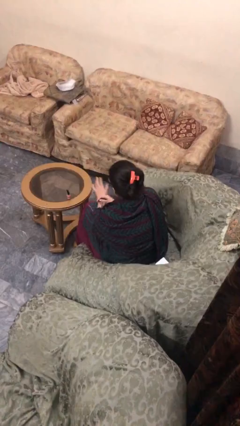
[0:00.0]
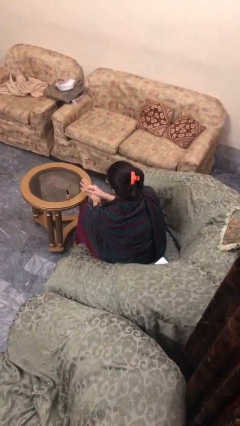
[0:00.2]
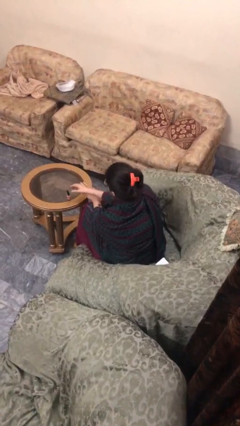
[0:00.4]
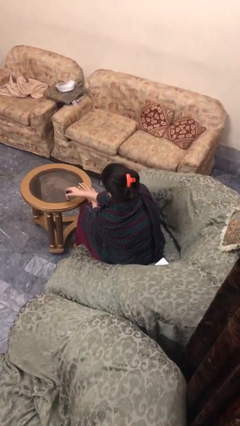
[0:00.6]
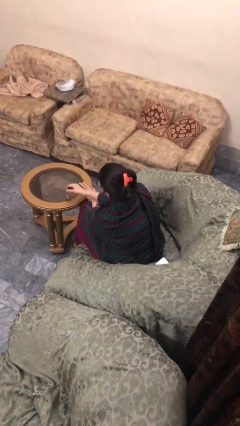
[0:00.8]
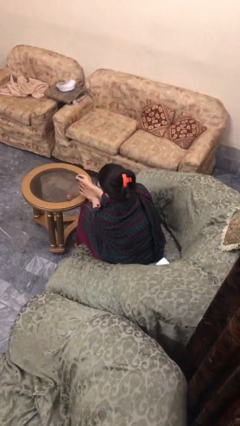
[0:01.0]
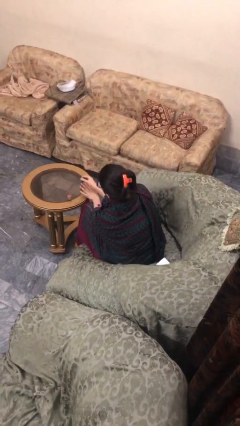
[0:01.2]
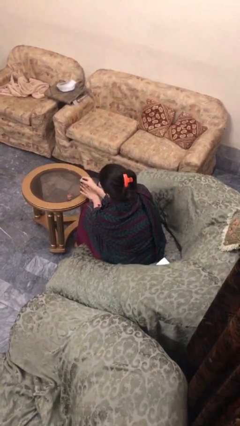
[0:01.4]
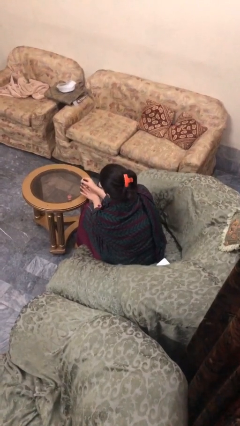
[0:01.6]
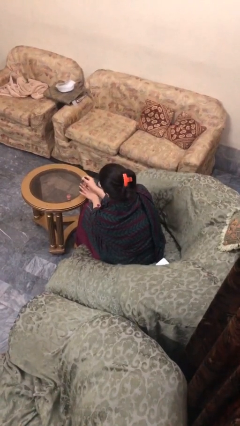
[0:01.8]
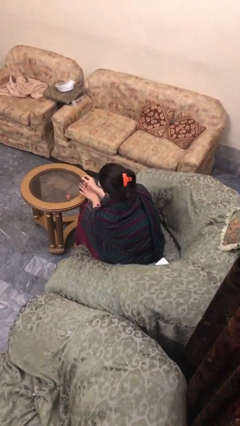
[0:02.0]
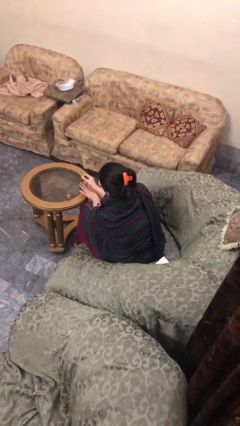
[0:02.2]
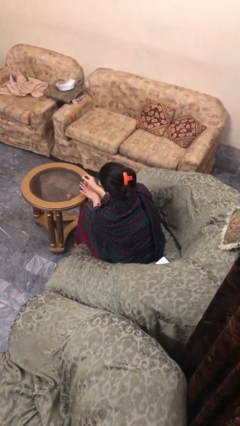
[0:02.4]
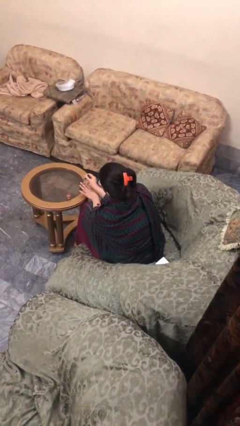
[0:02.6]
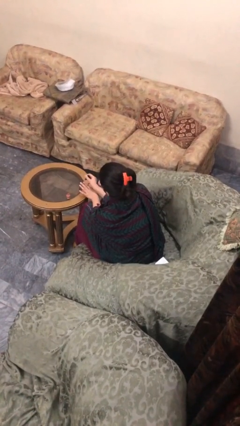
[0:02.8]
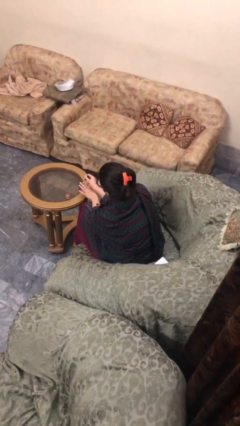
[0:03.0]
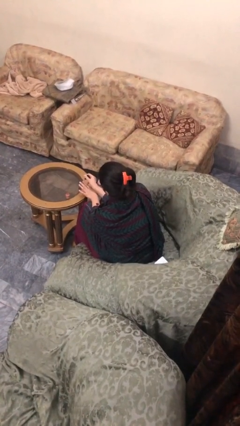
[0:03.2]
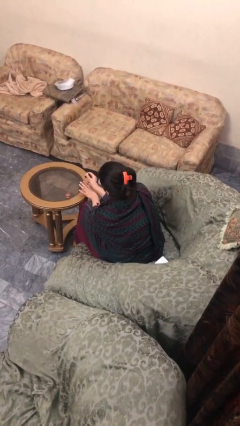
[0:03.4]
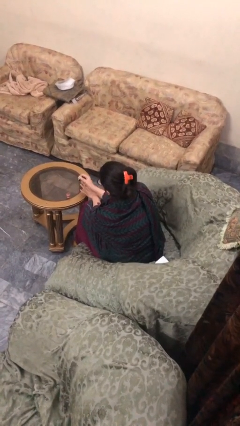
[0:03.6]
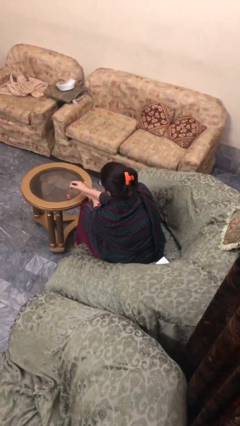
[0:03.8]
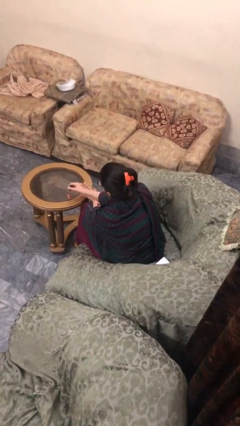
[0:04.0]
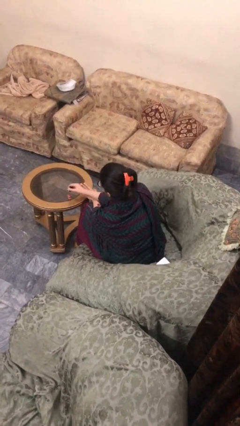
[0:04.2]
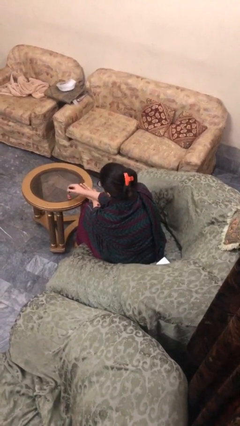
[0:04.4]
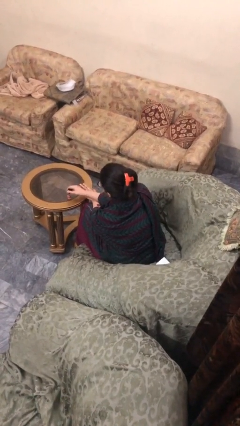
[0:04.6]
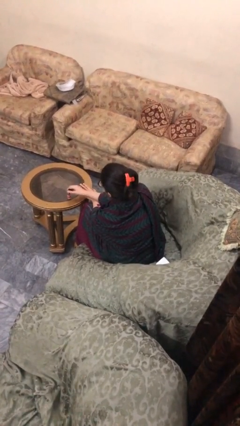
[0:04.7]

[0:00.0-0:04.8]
person paints fingernails

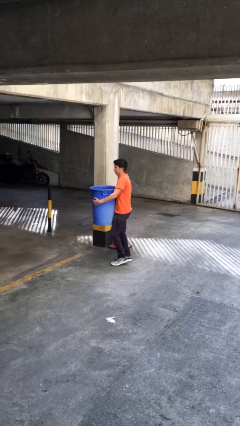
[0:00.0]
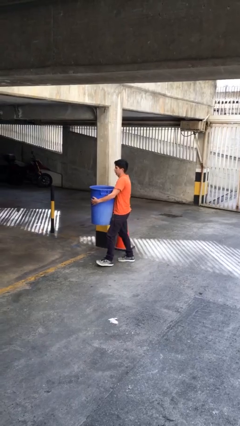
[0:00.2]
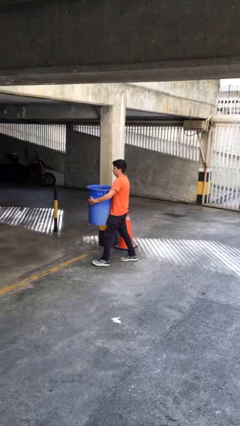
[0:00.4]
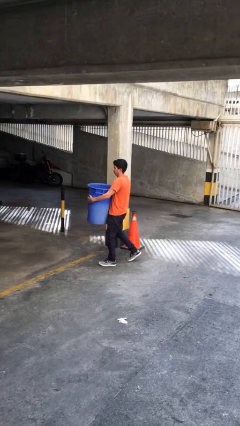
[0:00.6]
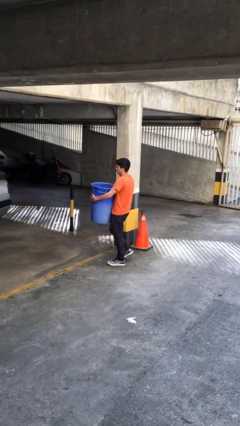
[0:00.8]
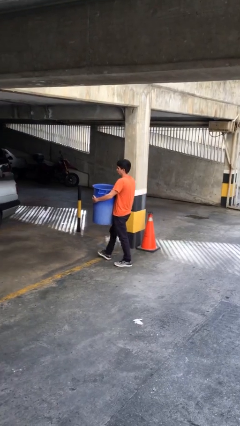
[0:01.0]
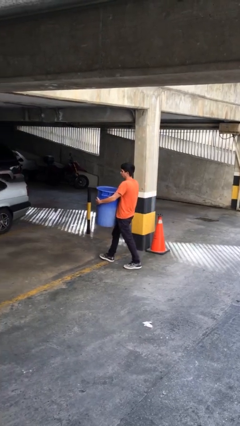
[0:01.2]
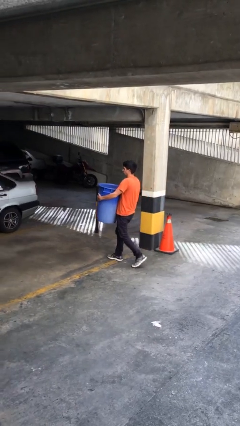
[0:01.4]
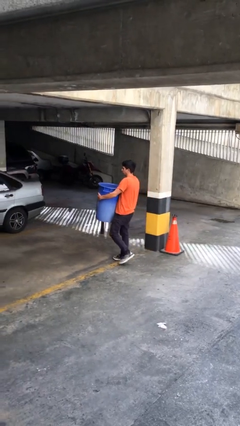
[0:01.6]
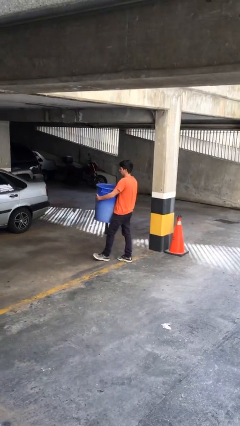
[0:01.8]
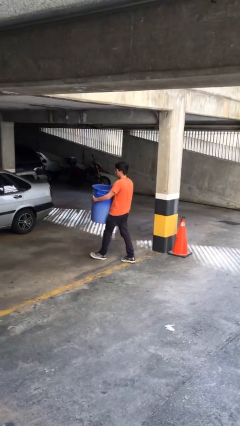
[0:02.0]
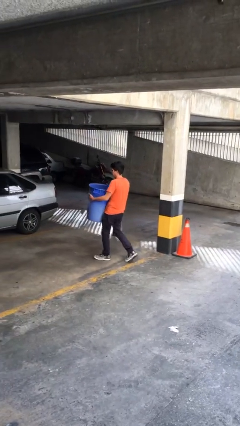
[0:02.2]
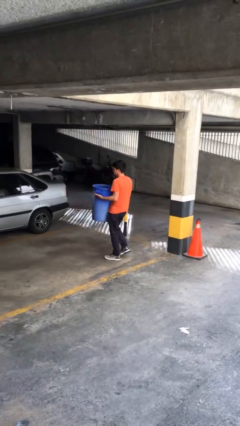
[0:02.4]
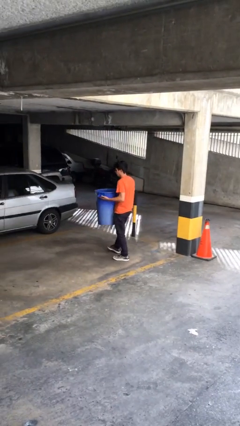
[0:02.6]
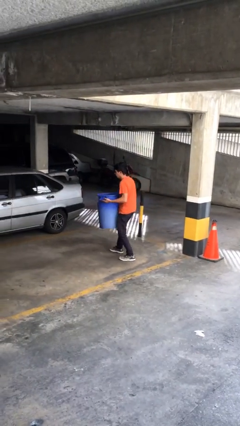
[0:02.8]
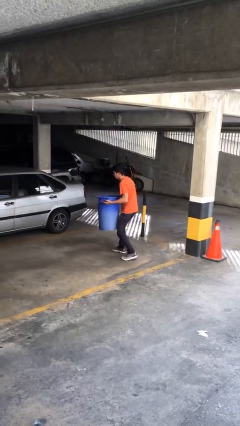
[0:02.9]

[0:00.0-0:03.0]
person carries heavy object

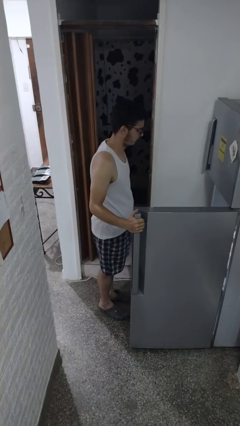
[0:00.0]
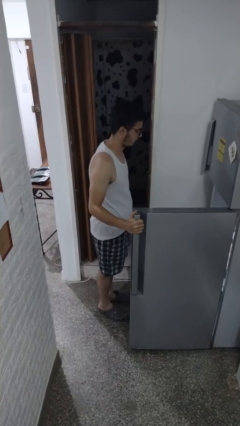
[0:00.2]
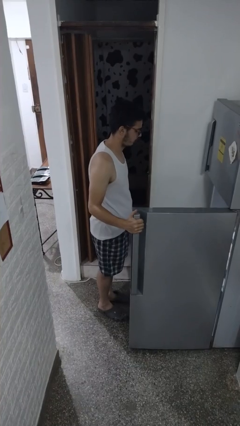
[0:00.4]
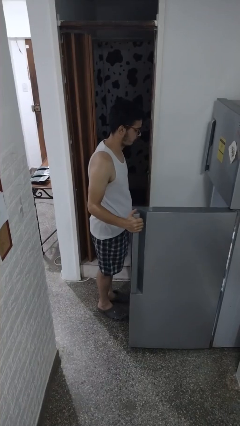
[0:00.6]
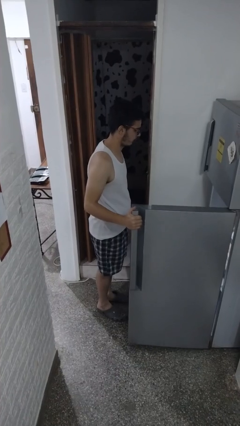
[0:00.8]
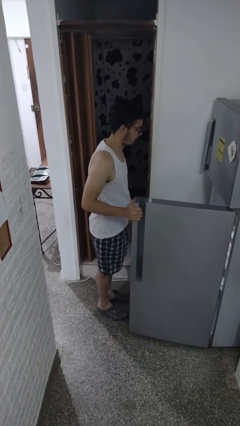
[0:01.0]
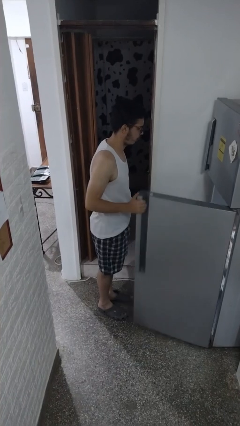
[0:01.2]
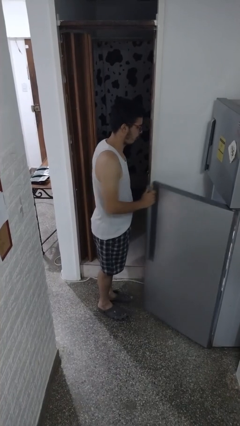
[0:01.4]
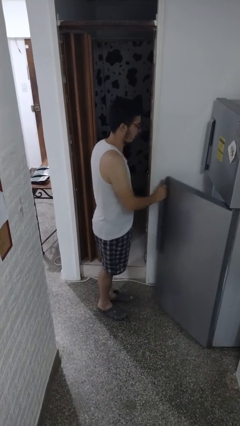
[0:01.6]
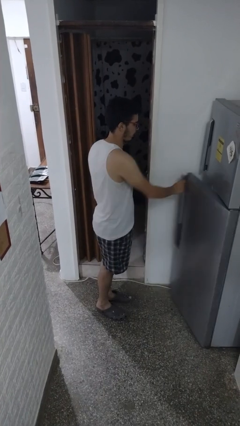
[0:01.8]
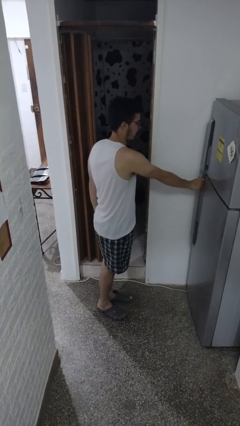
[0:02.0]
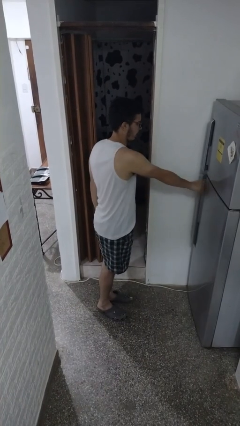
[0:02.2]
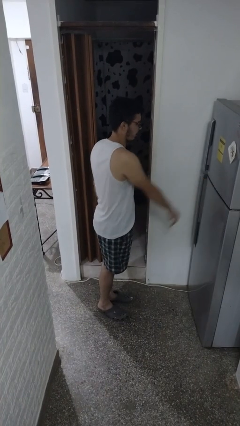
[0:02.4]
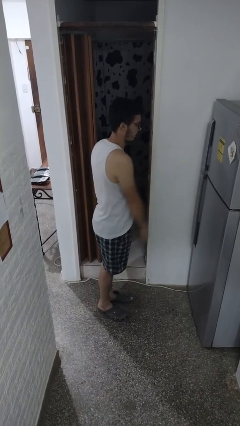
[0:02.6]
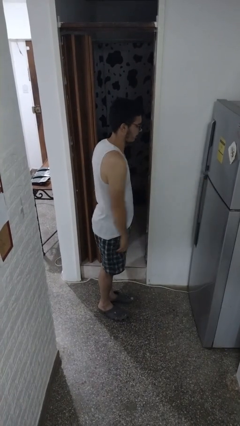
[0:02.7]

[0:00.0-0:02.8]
person closes refrigerator

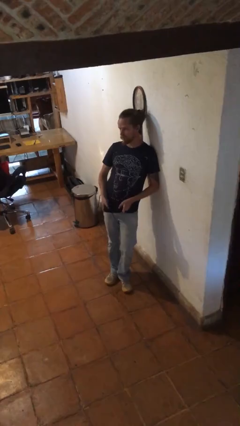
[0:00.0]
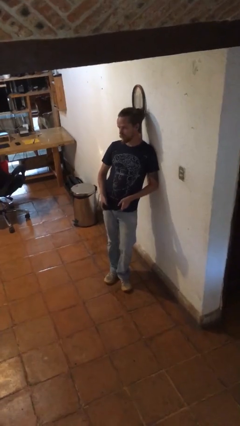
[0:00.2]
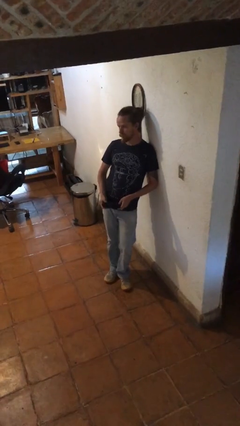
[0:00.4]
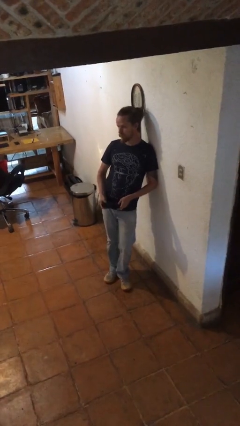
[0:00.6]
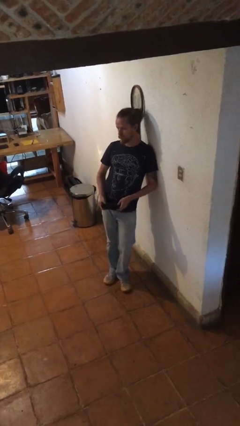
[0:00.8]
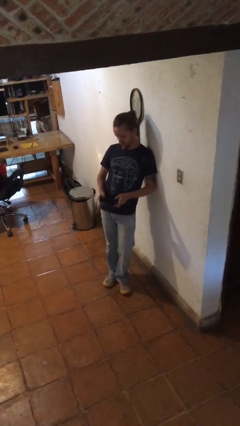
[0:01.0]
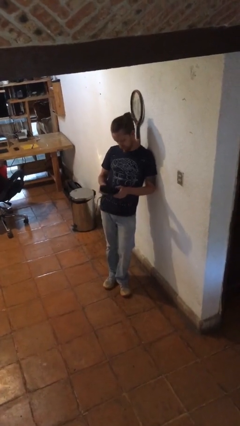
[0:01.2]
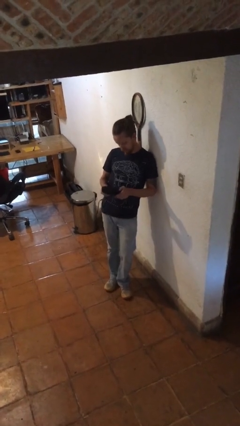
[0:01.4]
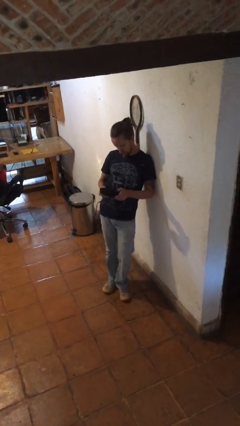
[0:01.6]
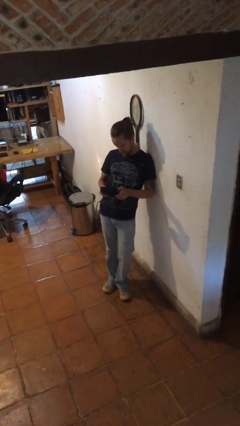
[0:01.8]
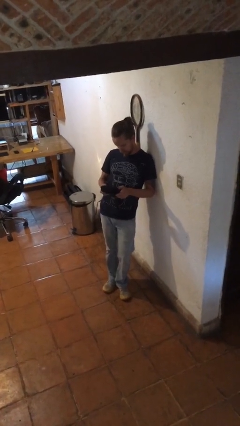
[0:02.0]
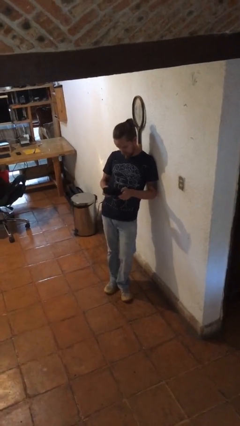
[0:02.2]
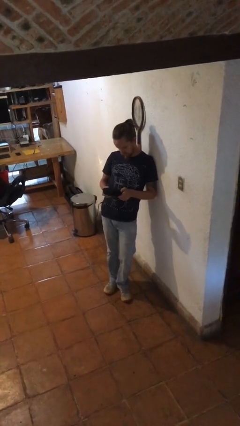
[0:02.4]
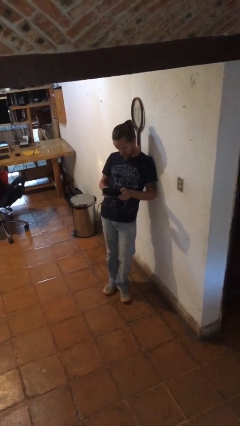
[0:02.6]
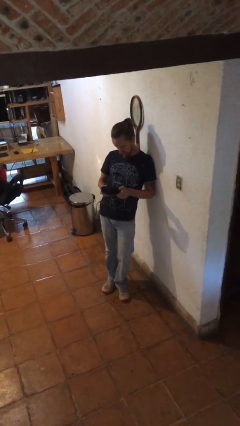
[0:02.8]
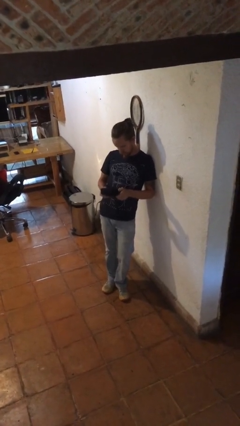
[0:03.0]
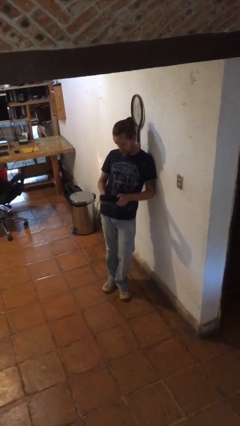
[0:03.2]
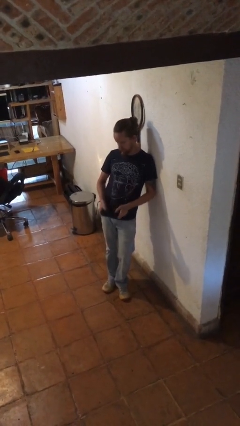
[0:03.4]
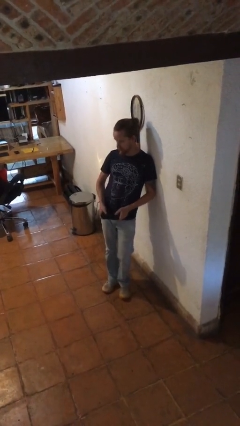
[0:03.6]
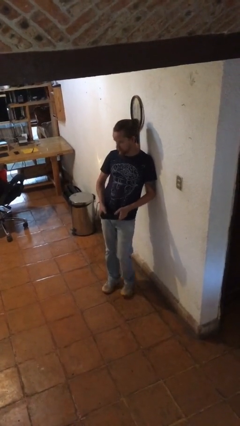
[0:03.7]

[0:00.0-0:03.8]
person interacts with handheld game

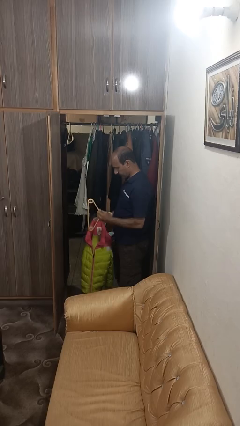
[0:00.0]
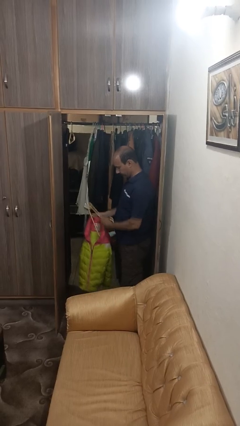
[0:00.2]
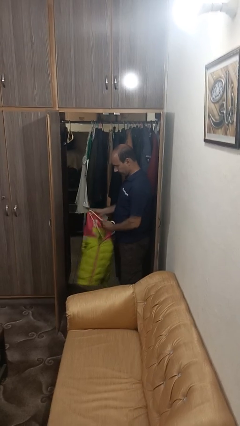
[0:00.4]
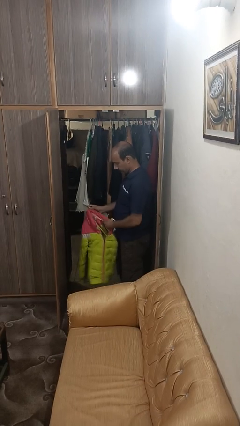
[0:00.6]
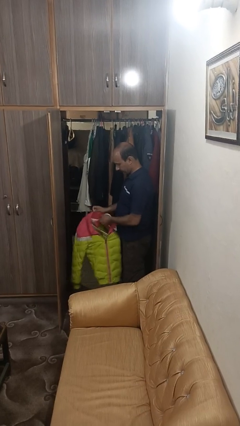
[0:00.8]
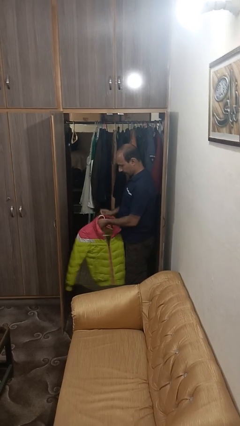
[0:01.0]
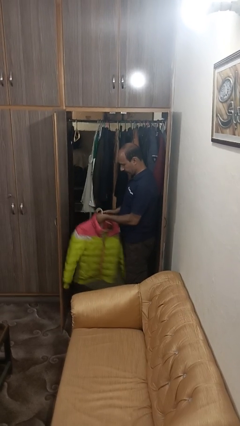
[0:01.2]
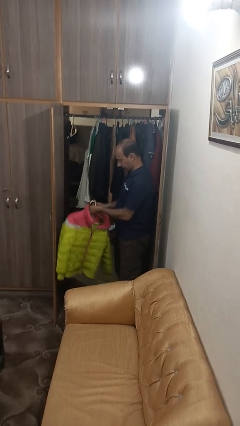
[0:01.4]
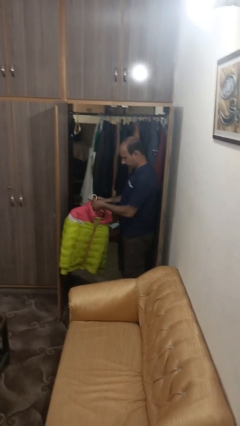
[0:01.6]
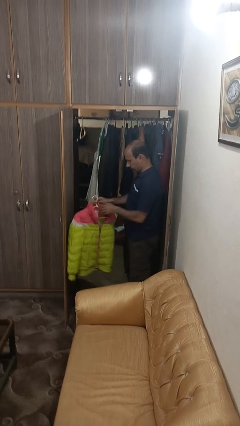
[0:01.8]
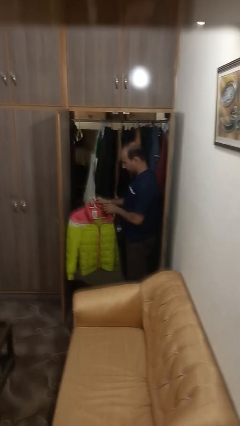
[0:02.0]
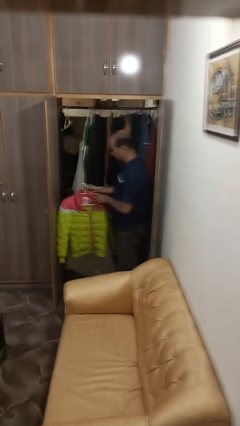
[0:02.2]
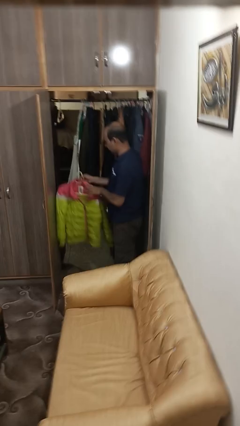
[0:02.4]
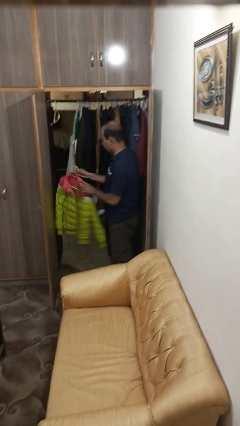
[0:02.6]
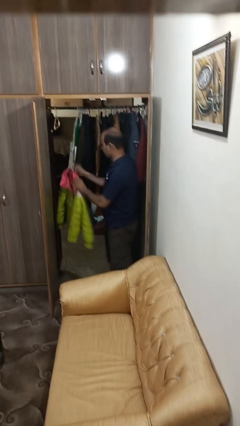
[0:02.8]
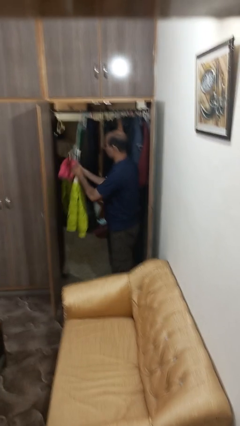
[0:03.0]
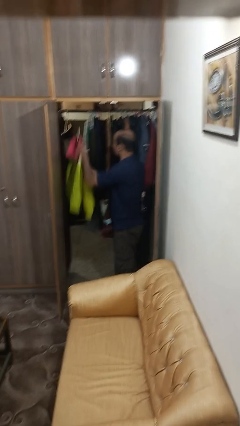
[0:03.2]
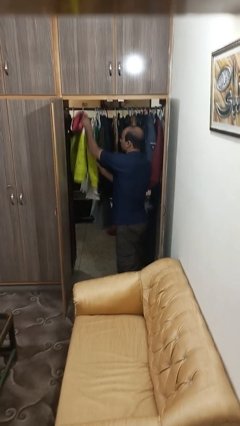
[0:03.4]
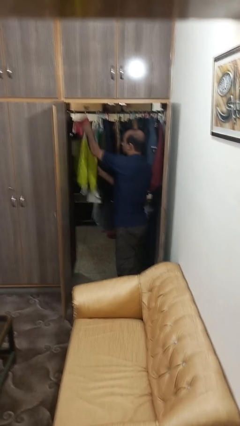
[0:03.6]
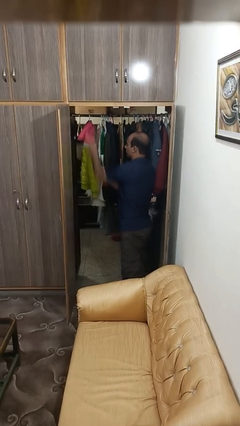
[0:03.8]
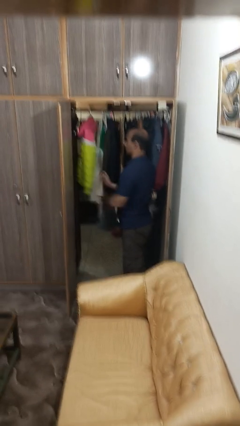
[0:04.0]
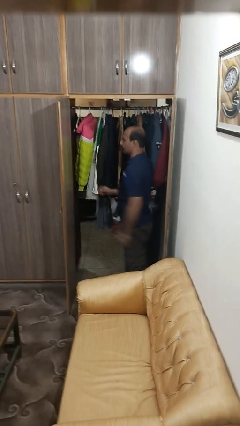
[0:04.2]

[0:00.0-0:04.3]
person puts clothes into closet
